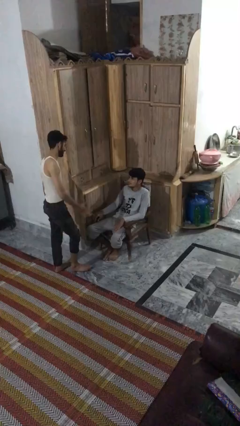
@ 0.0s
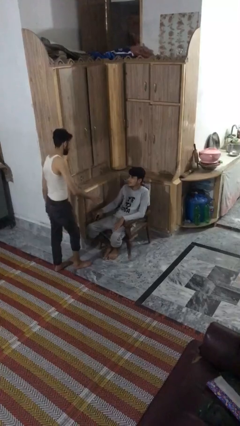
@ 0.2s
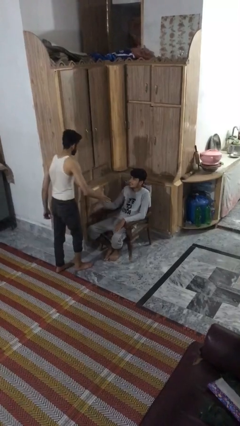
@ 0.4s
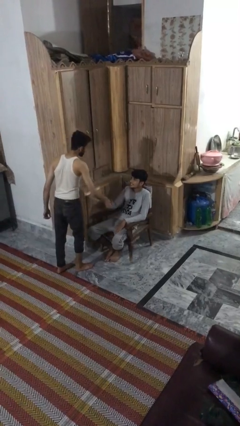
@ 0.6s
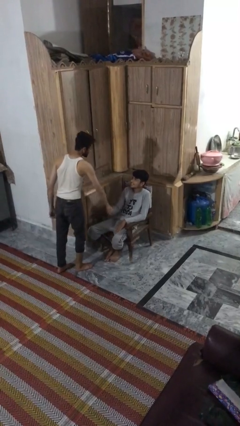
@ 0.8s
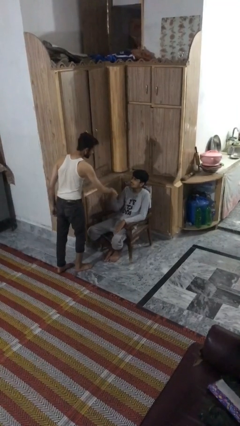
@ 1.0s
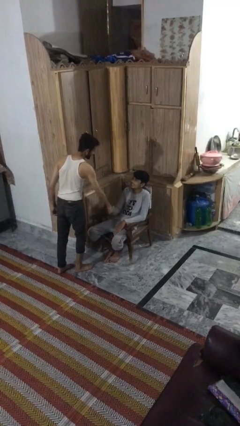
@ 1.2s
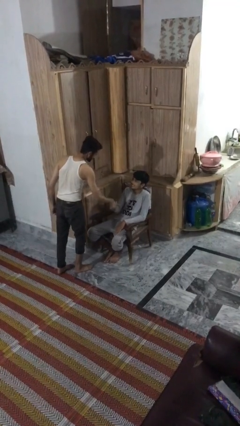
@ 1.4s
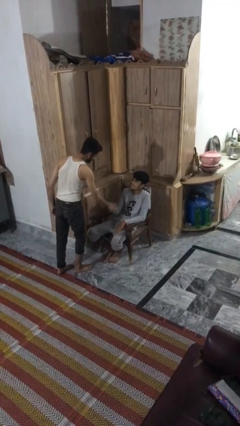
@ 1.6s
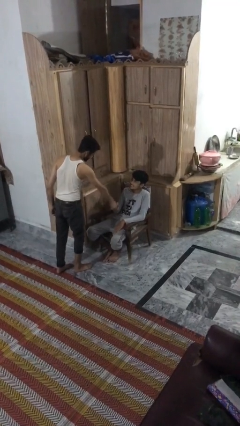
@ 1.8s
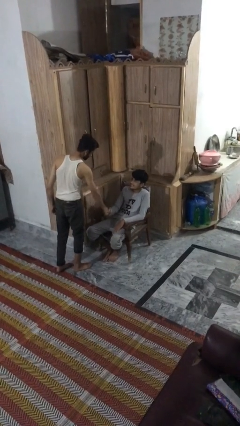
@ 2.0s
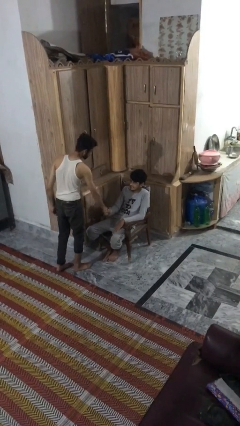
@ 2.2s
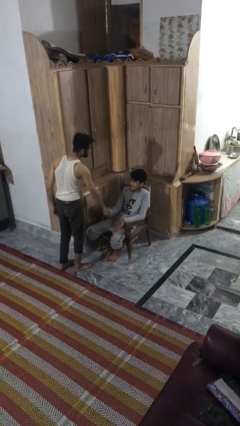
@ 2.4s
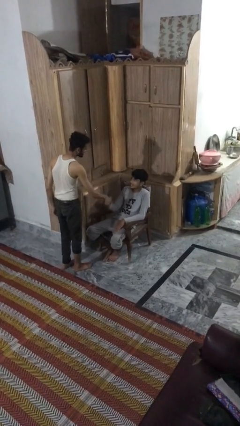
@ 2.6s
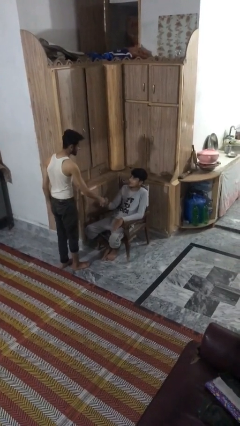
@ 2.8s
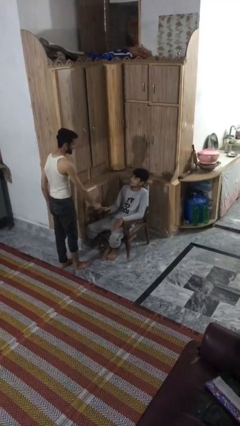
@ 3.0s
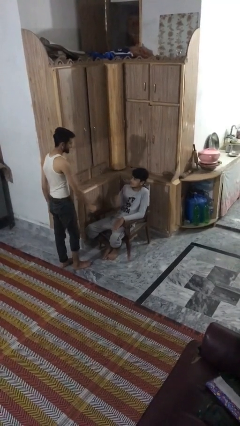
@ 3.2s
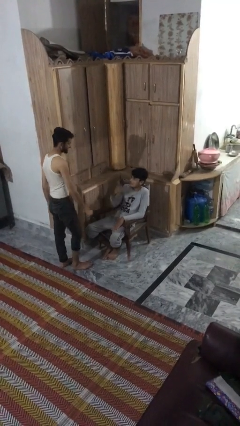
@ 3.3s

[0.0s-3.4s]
person shakes hand

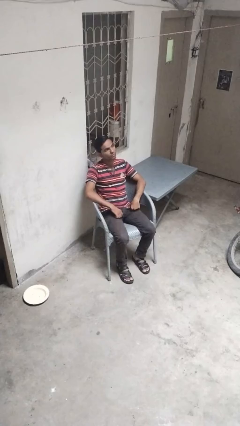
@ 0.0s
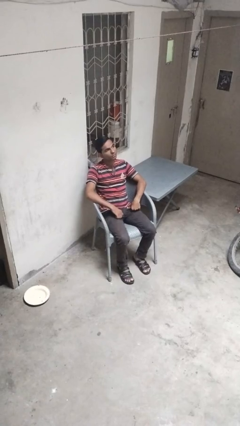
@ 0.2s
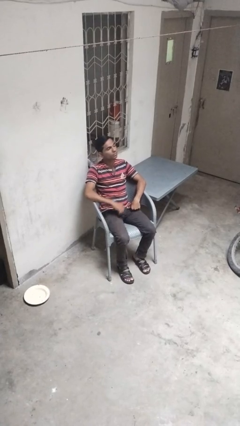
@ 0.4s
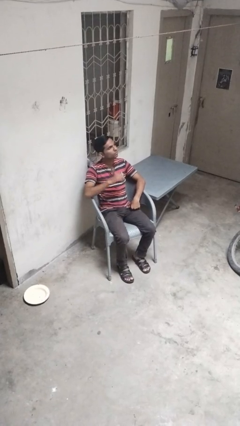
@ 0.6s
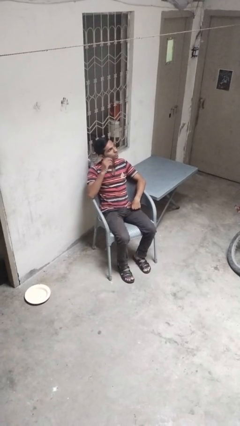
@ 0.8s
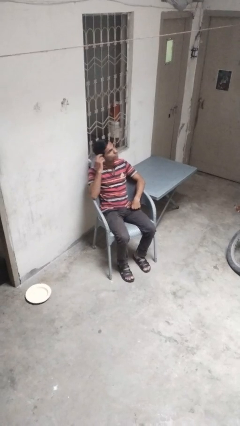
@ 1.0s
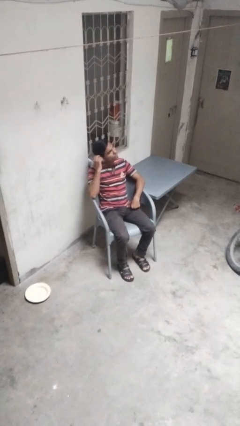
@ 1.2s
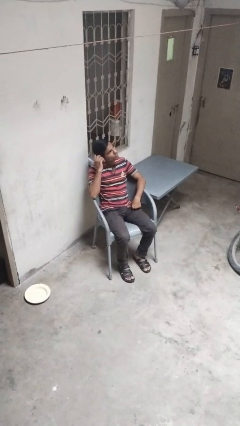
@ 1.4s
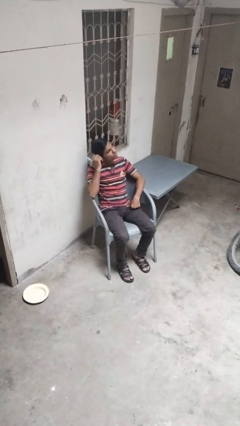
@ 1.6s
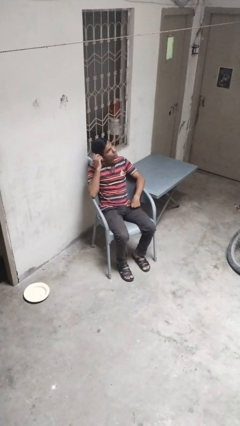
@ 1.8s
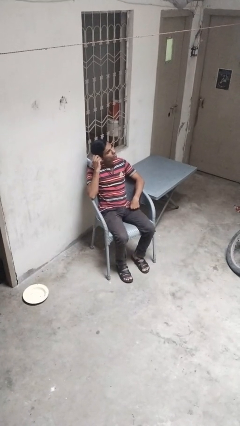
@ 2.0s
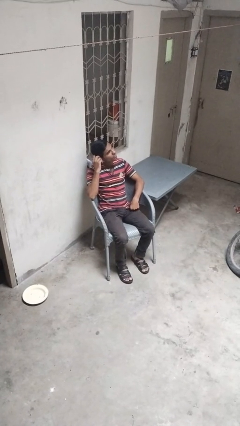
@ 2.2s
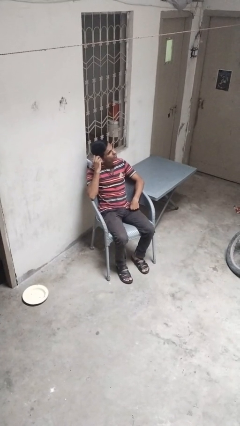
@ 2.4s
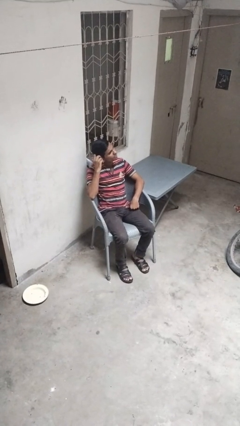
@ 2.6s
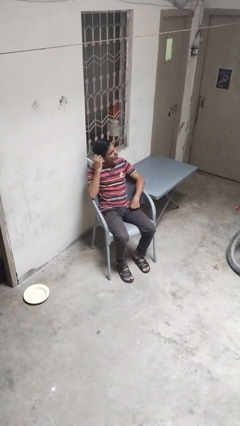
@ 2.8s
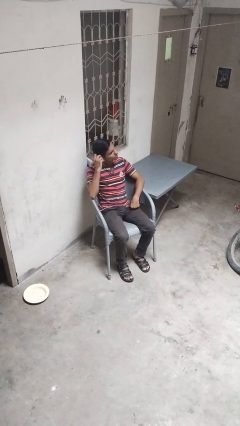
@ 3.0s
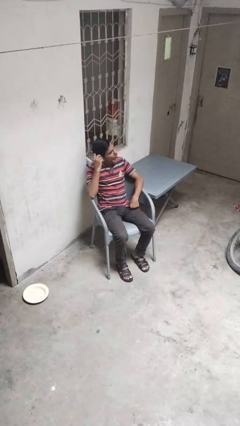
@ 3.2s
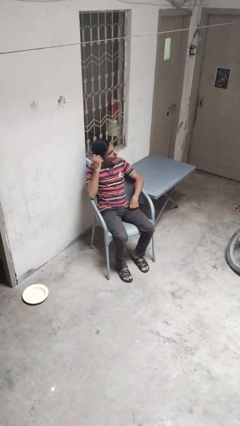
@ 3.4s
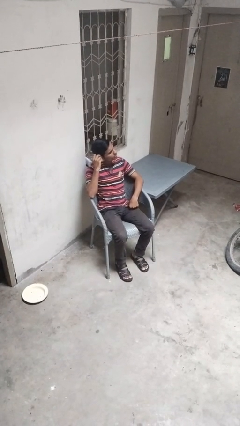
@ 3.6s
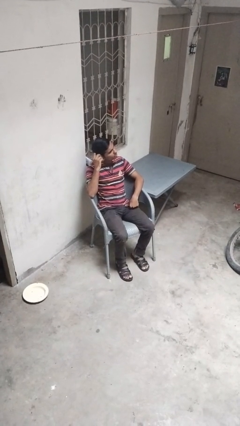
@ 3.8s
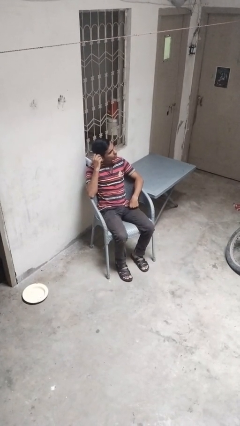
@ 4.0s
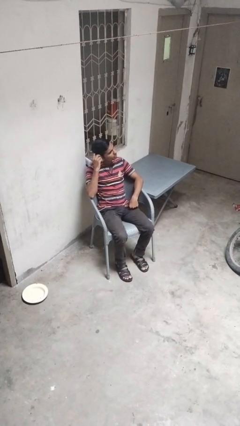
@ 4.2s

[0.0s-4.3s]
person strokes hair

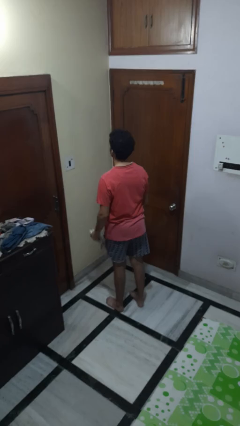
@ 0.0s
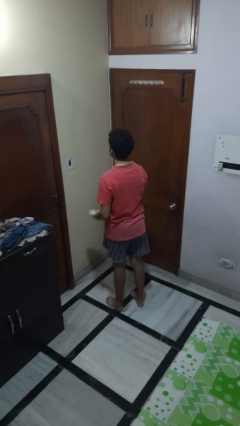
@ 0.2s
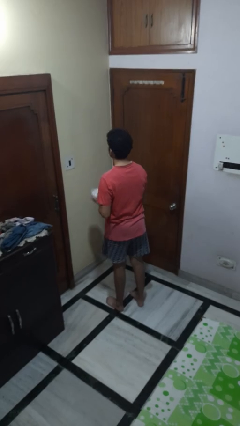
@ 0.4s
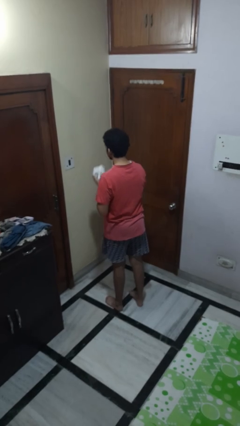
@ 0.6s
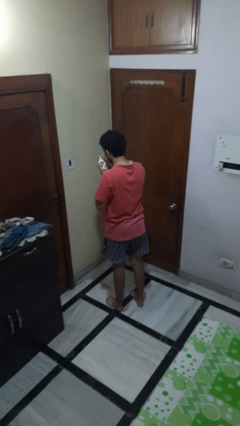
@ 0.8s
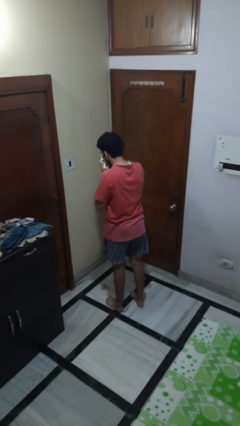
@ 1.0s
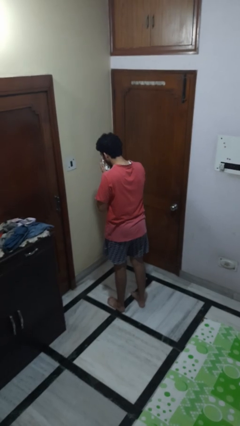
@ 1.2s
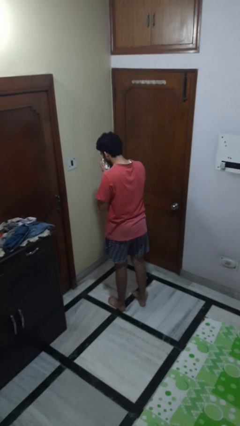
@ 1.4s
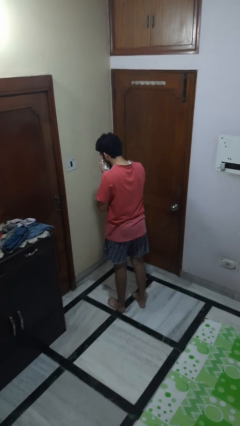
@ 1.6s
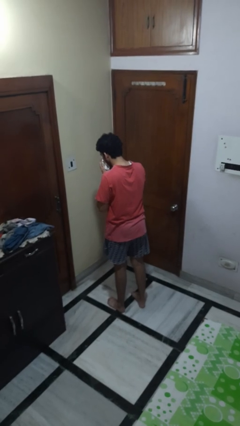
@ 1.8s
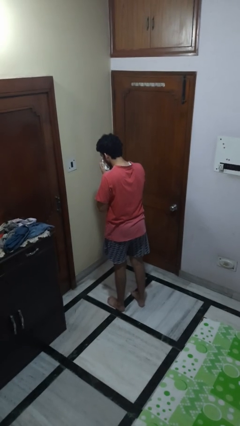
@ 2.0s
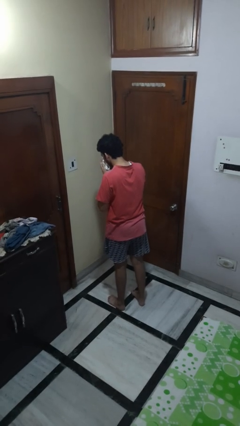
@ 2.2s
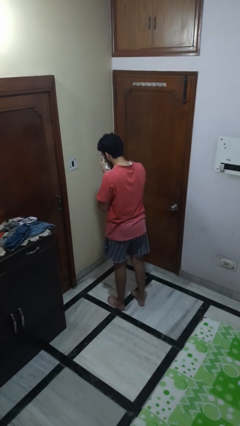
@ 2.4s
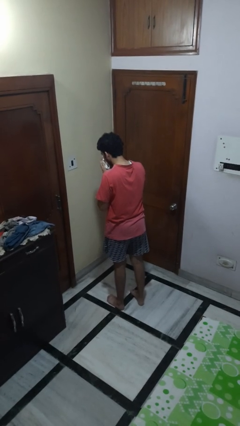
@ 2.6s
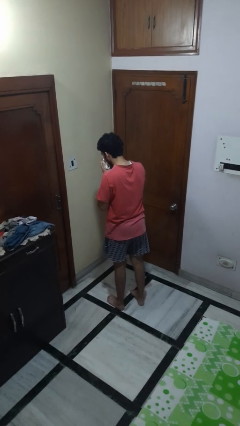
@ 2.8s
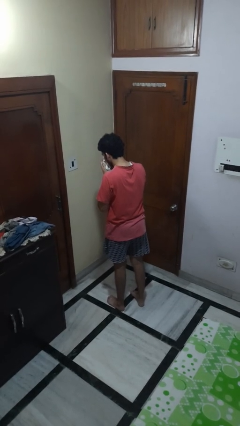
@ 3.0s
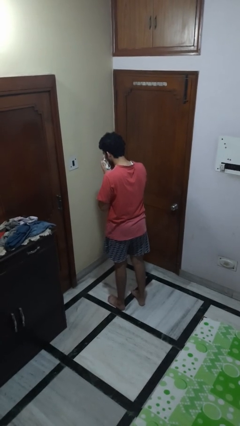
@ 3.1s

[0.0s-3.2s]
person blows nose

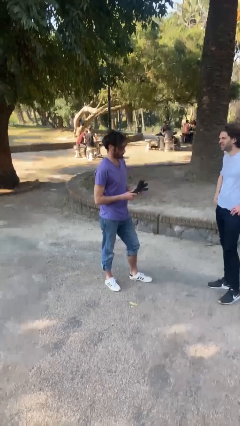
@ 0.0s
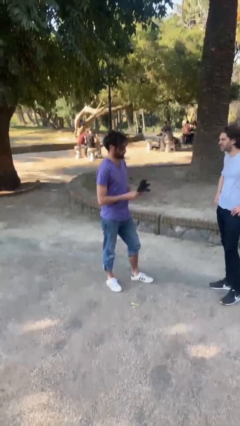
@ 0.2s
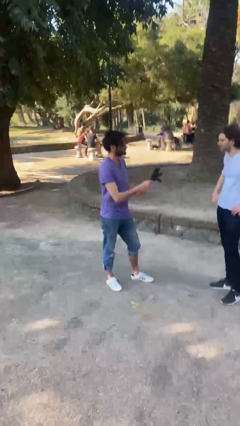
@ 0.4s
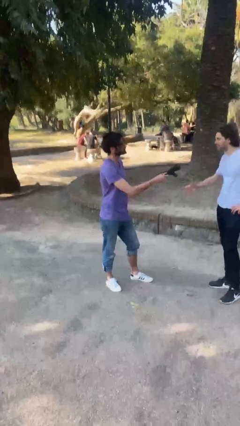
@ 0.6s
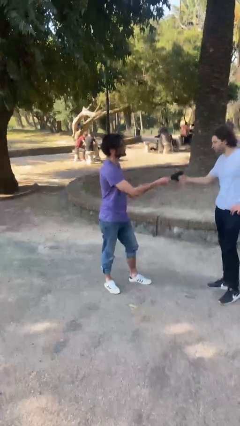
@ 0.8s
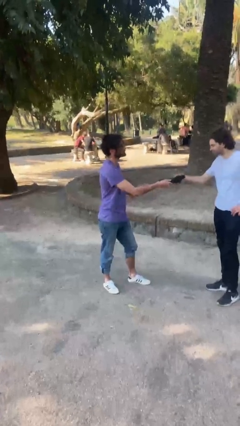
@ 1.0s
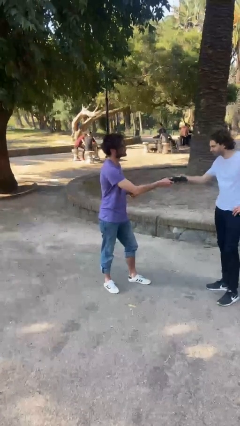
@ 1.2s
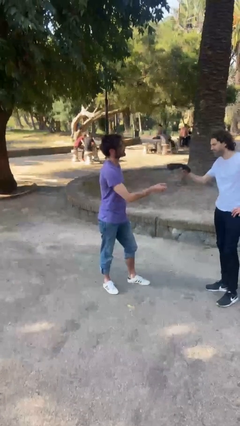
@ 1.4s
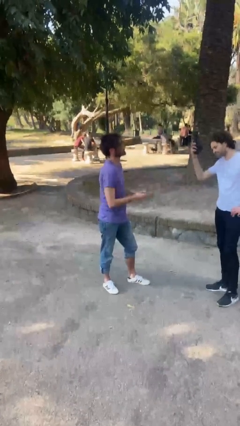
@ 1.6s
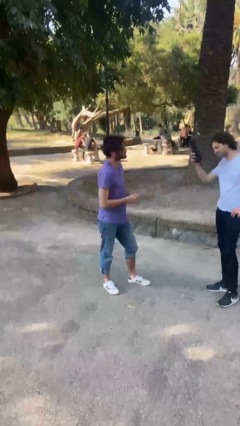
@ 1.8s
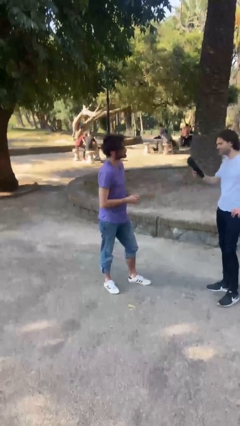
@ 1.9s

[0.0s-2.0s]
person transfers object to person

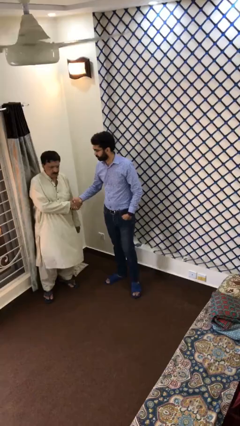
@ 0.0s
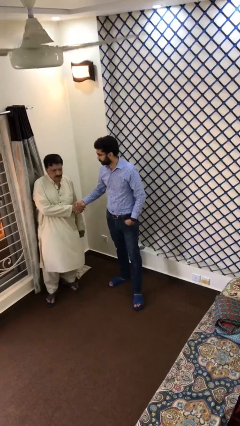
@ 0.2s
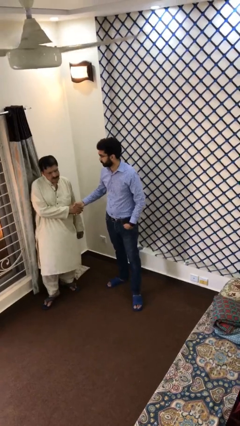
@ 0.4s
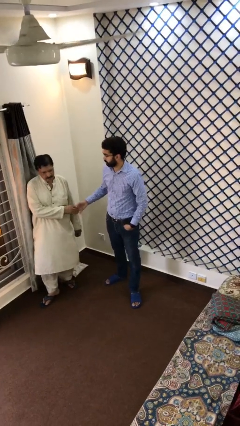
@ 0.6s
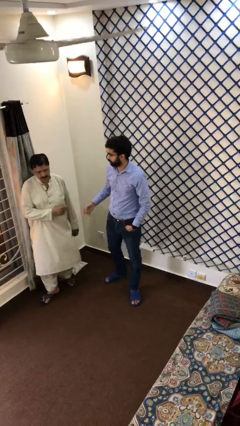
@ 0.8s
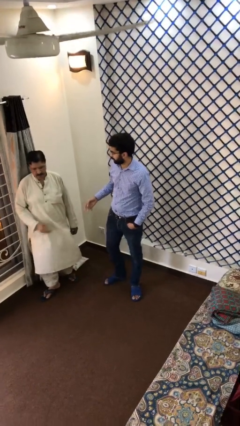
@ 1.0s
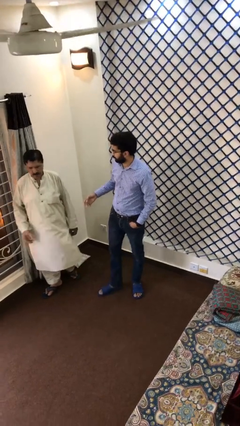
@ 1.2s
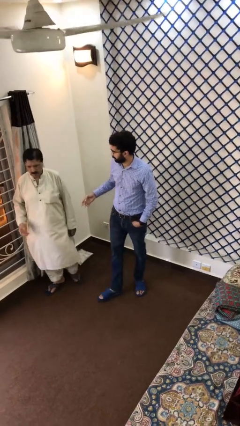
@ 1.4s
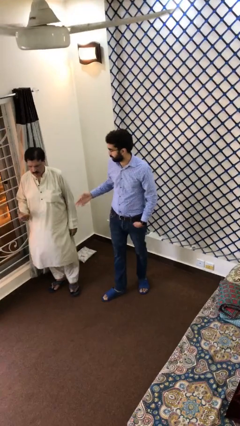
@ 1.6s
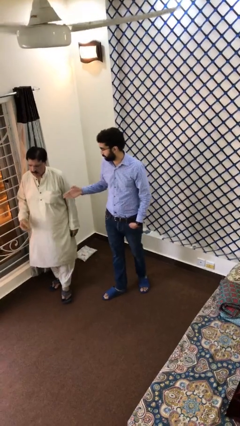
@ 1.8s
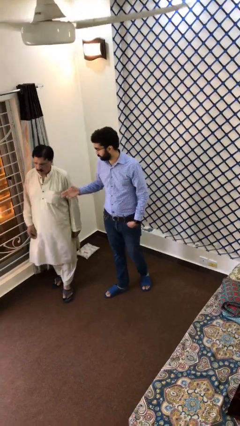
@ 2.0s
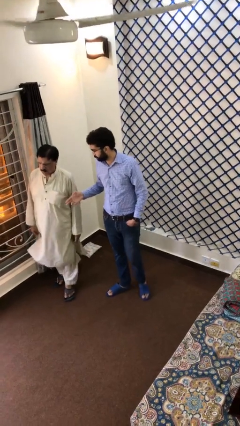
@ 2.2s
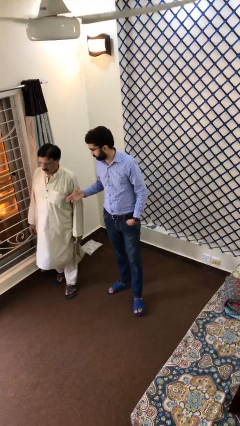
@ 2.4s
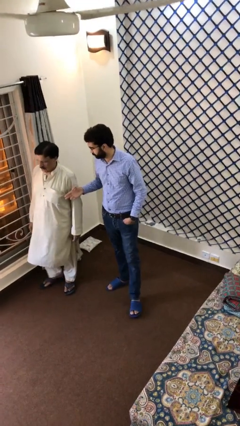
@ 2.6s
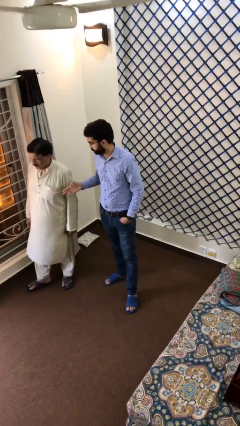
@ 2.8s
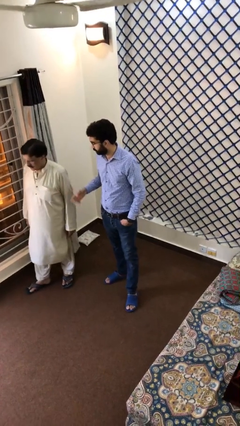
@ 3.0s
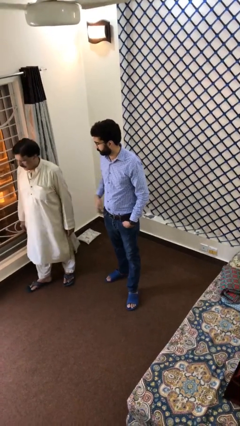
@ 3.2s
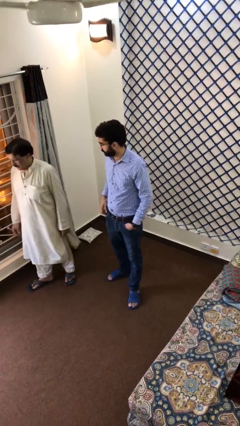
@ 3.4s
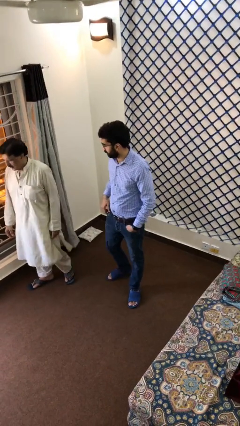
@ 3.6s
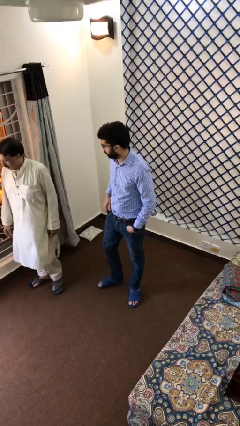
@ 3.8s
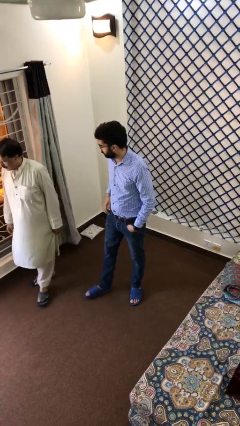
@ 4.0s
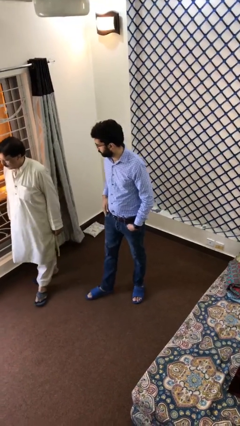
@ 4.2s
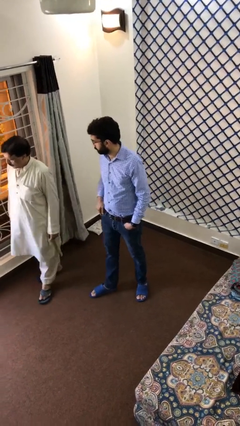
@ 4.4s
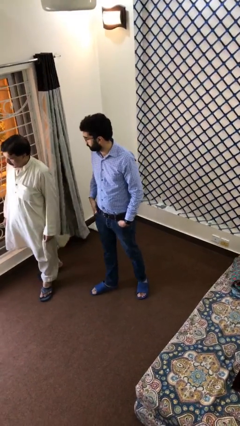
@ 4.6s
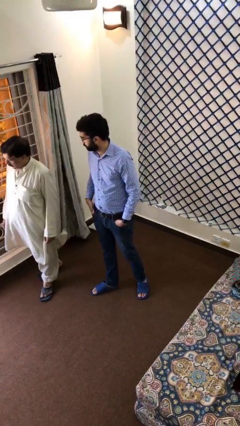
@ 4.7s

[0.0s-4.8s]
person talks to person
